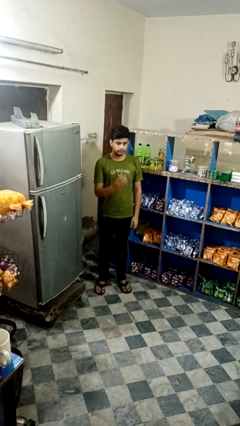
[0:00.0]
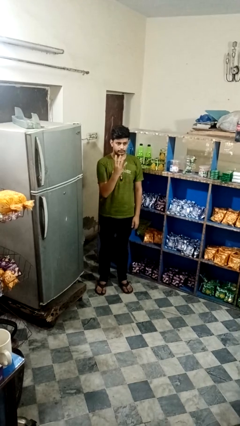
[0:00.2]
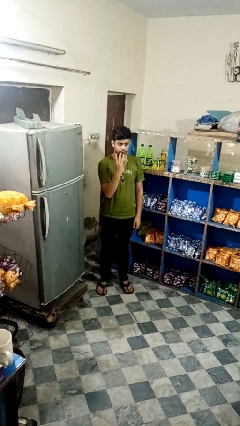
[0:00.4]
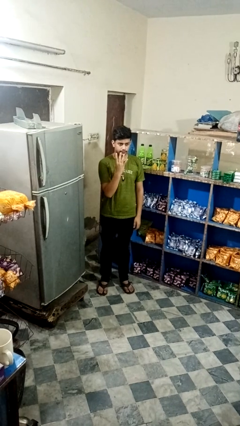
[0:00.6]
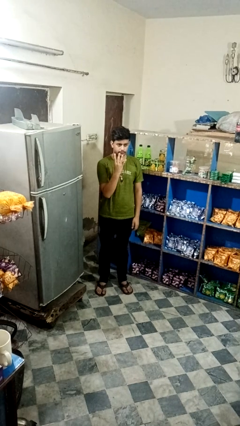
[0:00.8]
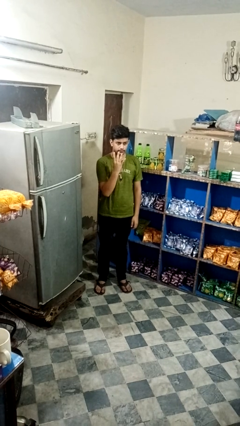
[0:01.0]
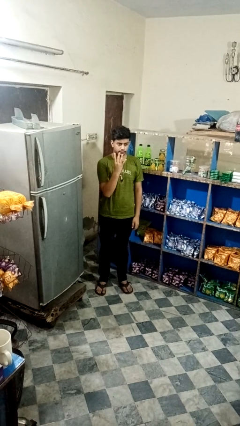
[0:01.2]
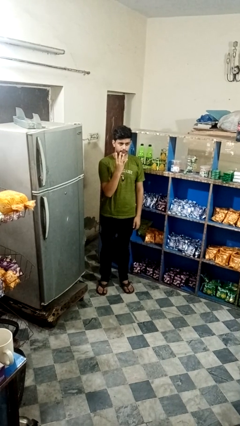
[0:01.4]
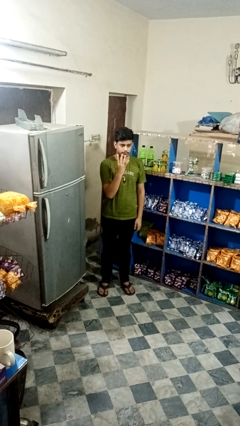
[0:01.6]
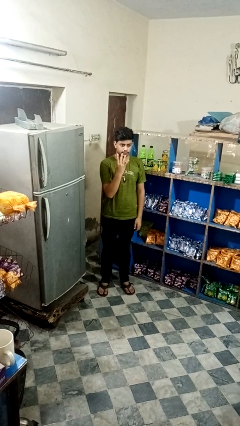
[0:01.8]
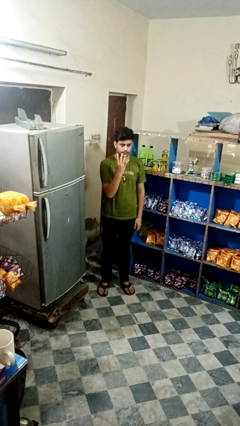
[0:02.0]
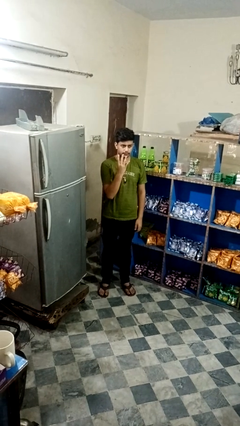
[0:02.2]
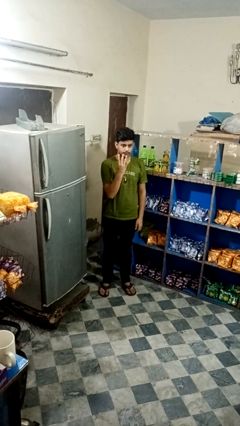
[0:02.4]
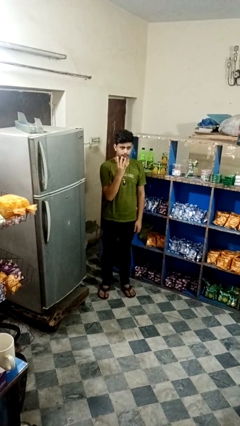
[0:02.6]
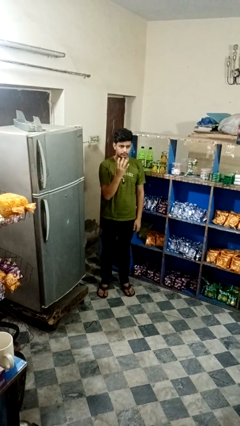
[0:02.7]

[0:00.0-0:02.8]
person gestures number four

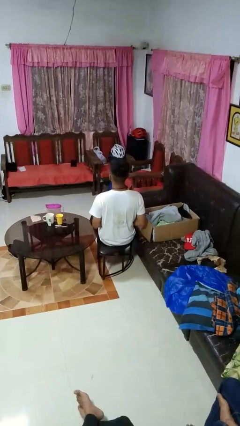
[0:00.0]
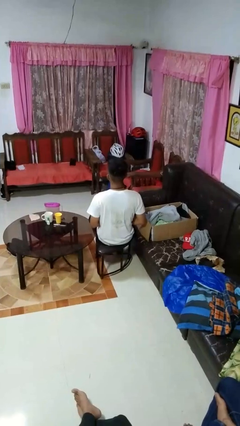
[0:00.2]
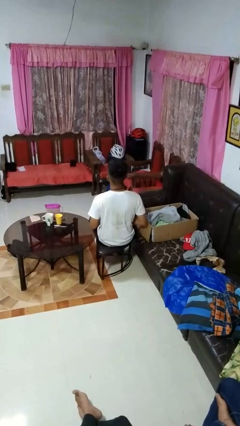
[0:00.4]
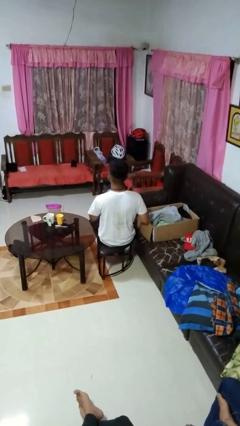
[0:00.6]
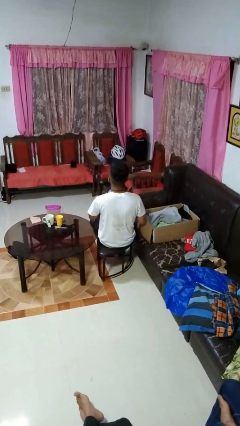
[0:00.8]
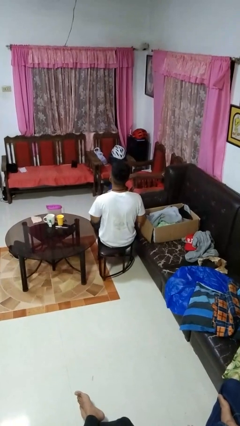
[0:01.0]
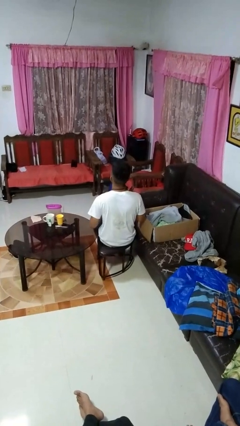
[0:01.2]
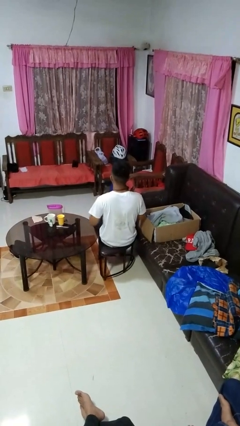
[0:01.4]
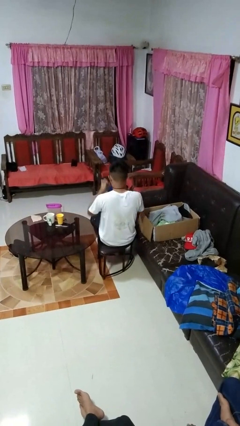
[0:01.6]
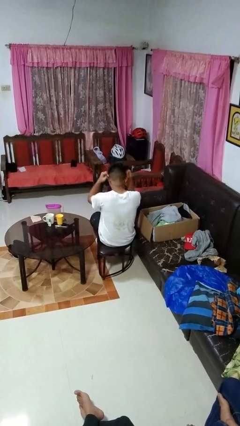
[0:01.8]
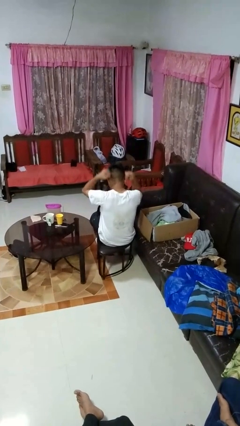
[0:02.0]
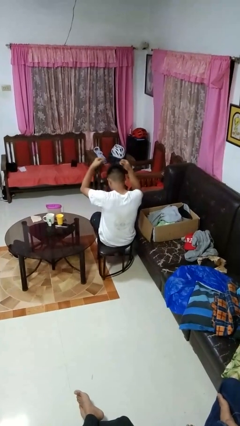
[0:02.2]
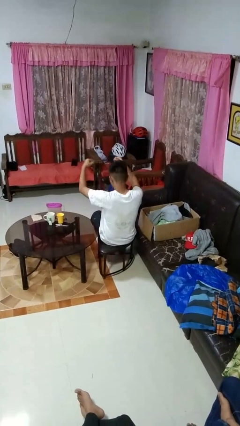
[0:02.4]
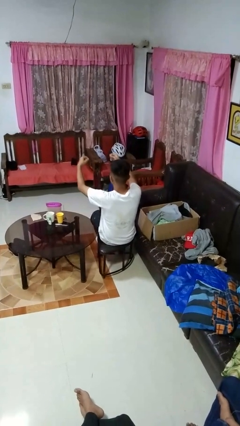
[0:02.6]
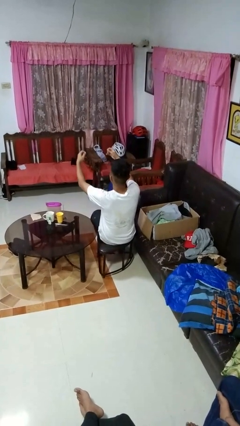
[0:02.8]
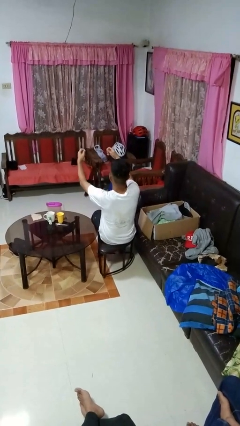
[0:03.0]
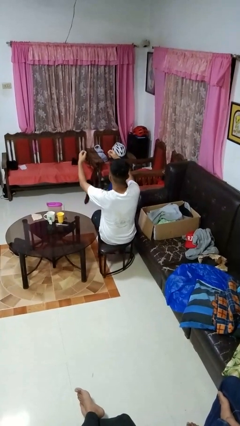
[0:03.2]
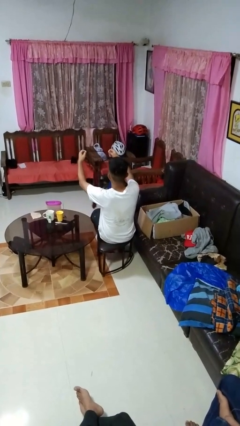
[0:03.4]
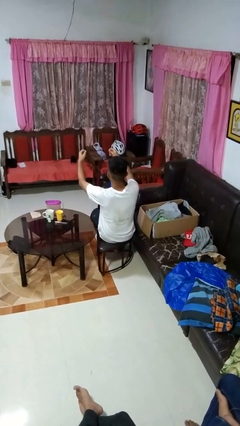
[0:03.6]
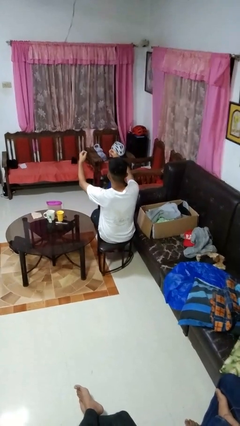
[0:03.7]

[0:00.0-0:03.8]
person takes off necktie

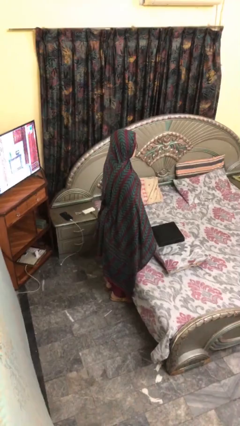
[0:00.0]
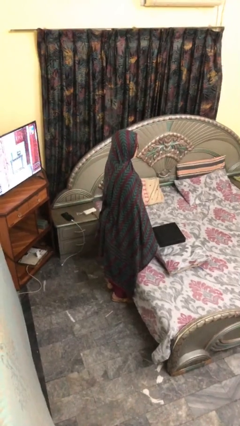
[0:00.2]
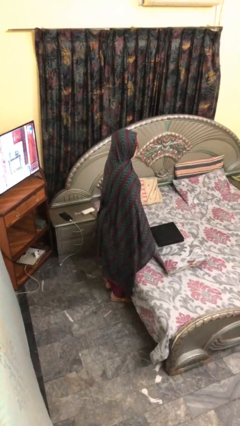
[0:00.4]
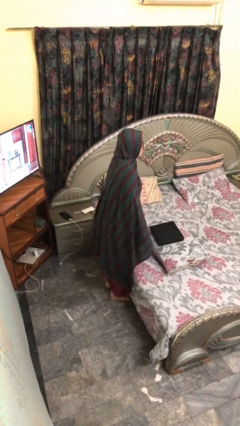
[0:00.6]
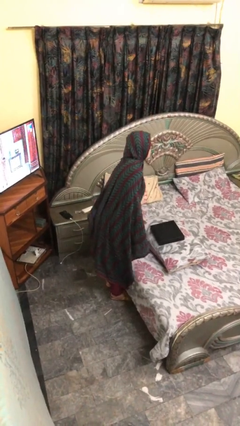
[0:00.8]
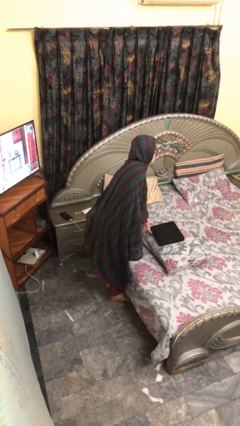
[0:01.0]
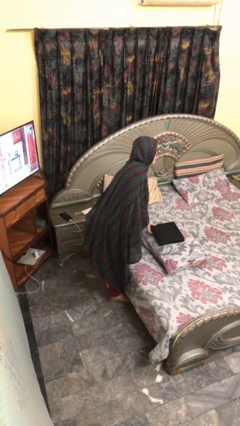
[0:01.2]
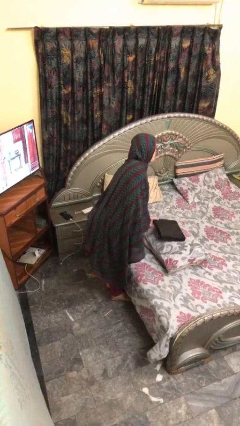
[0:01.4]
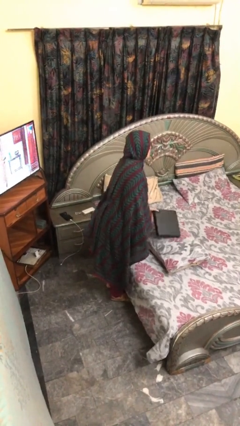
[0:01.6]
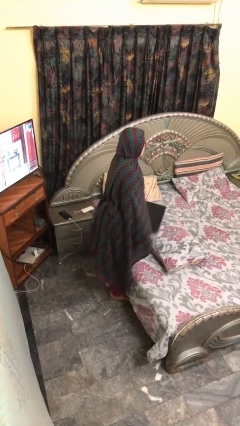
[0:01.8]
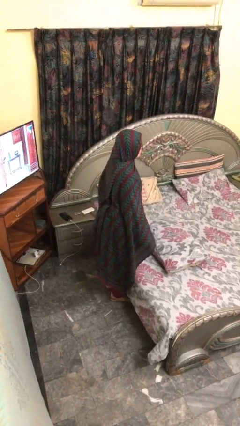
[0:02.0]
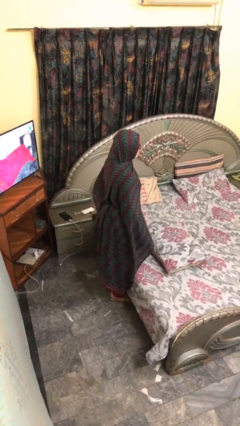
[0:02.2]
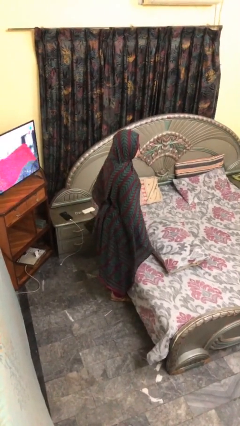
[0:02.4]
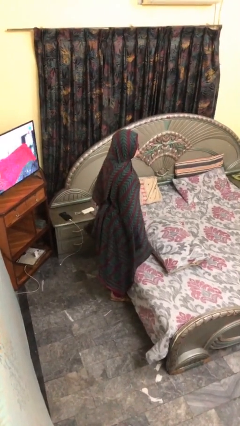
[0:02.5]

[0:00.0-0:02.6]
person picks up object from bed

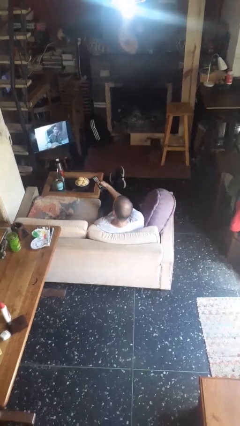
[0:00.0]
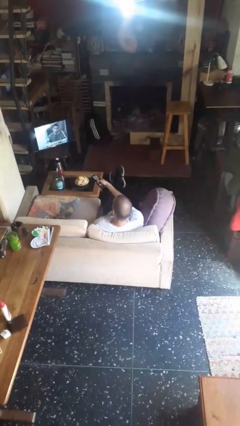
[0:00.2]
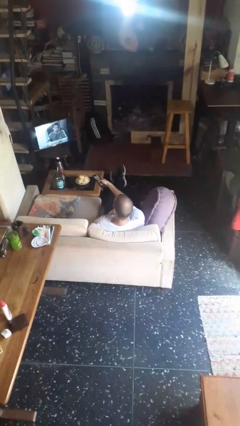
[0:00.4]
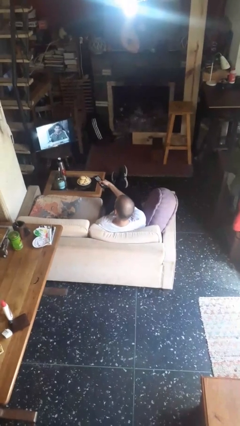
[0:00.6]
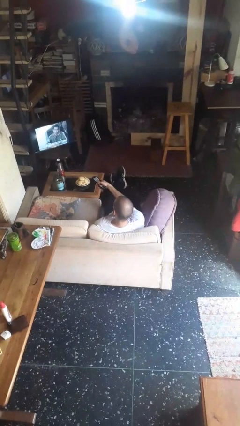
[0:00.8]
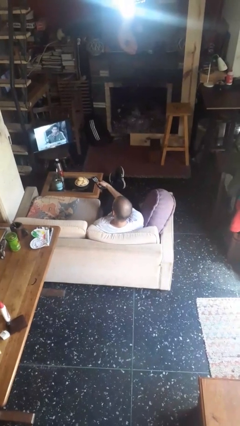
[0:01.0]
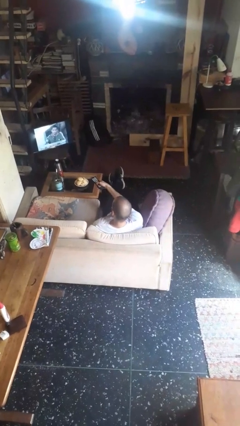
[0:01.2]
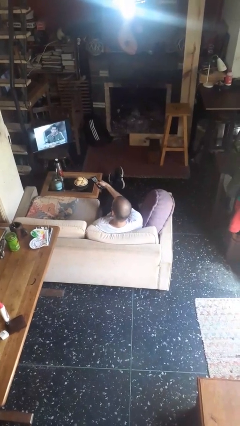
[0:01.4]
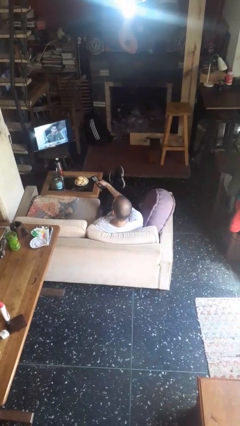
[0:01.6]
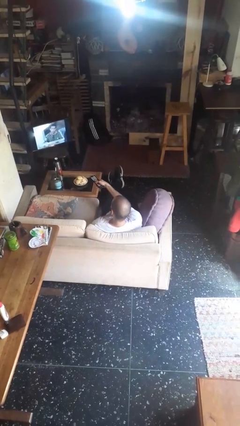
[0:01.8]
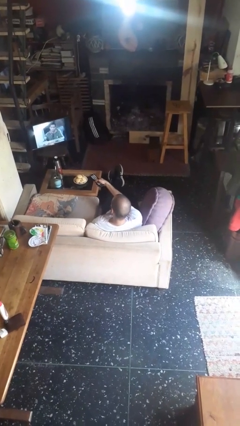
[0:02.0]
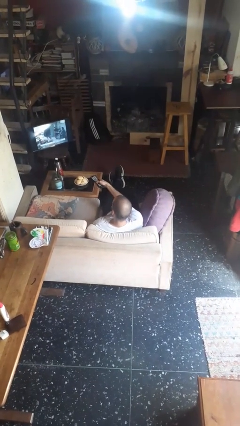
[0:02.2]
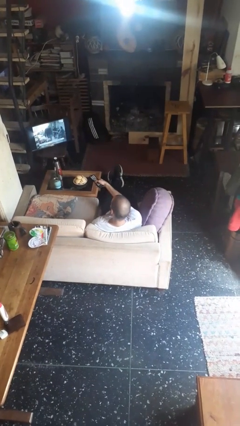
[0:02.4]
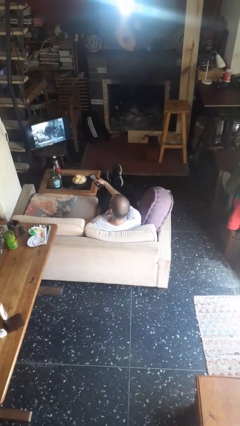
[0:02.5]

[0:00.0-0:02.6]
person uses television remote

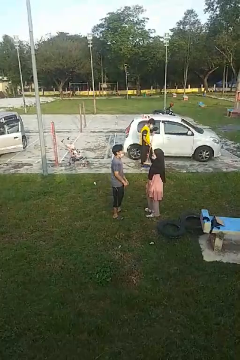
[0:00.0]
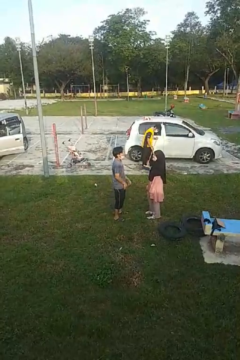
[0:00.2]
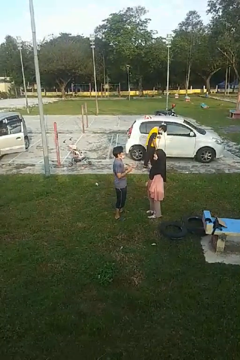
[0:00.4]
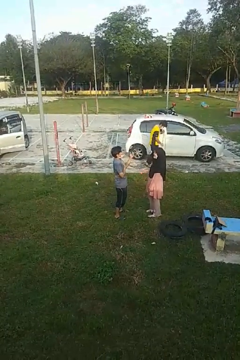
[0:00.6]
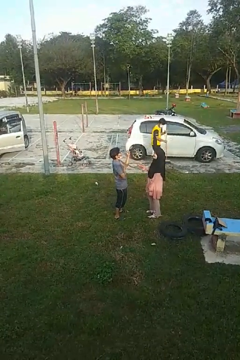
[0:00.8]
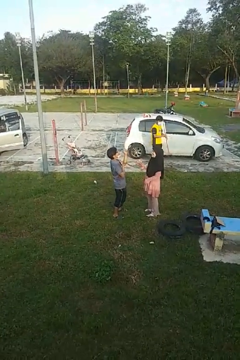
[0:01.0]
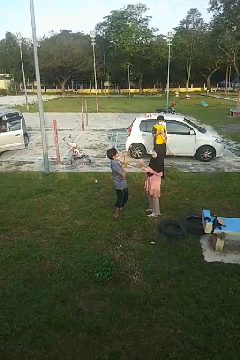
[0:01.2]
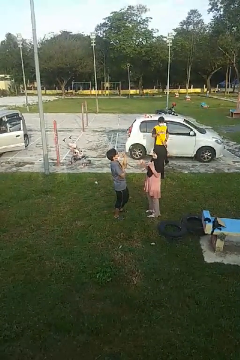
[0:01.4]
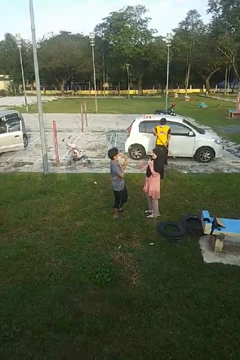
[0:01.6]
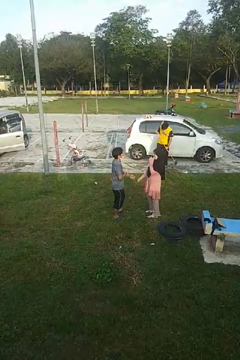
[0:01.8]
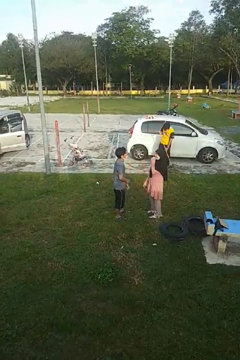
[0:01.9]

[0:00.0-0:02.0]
person laughs with person

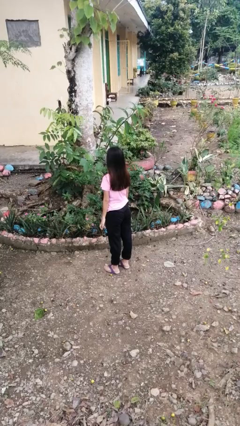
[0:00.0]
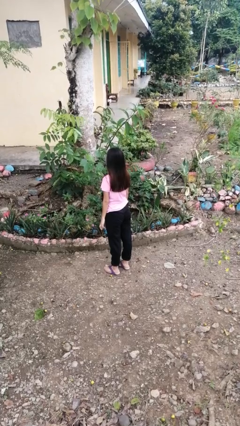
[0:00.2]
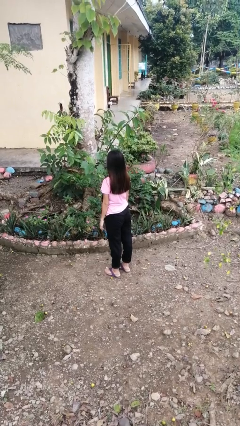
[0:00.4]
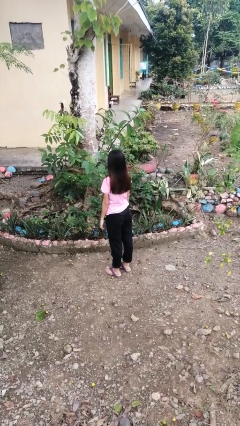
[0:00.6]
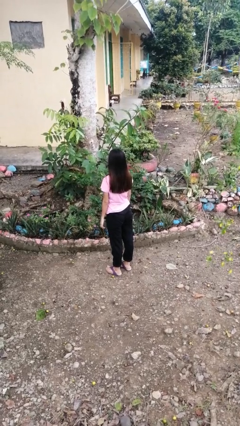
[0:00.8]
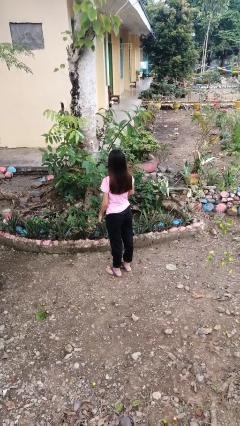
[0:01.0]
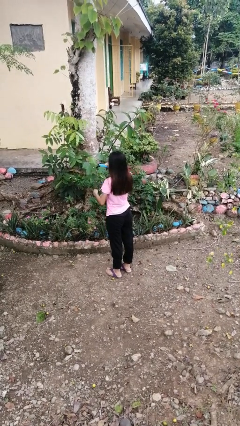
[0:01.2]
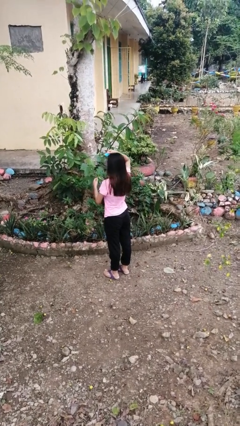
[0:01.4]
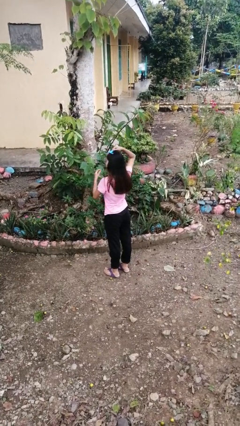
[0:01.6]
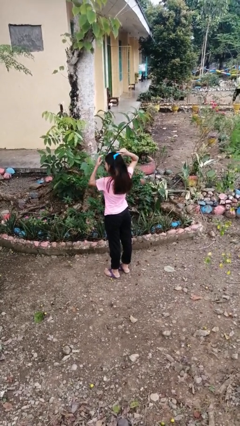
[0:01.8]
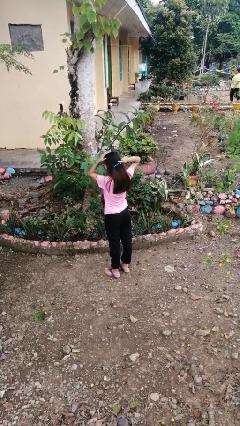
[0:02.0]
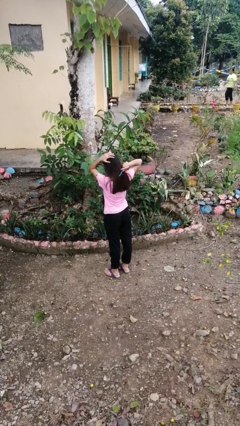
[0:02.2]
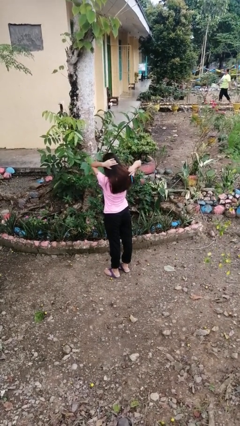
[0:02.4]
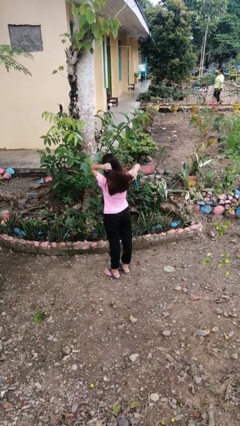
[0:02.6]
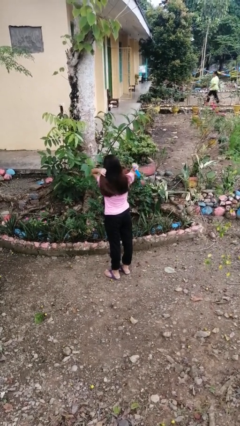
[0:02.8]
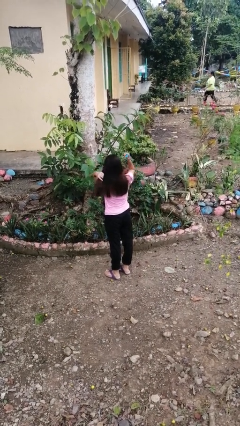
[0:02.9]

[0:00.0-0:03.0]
person brushes hair

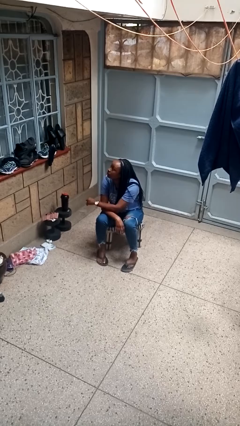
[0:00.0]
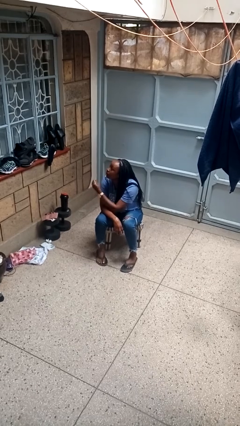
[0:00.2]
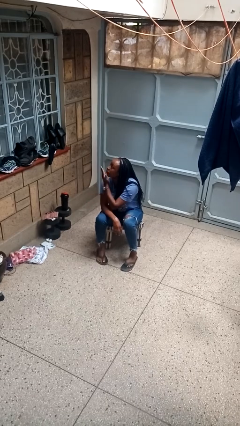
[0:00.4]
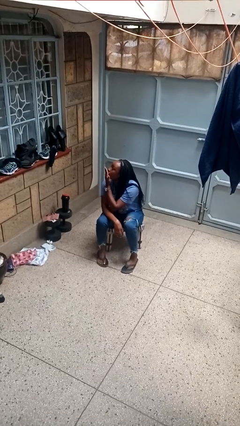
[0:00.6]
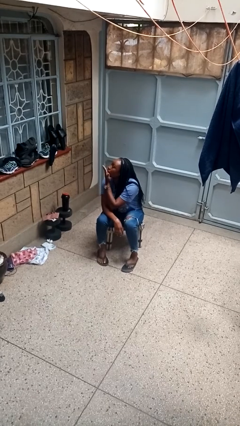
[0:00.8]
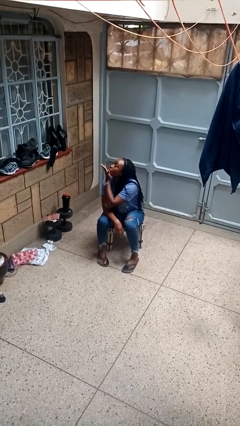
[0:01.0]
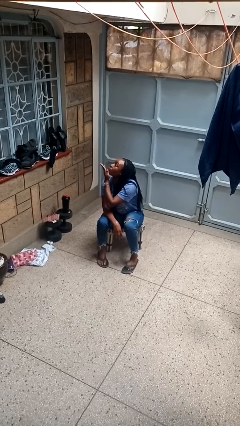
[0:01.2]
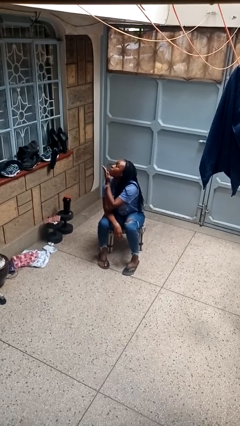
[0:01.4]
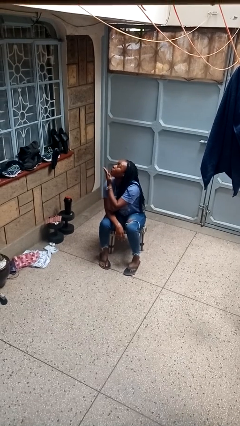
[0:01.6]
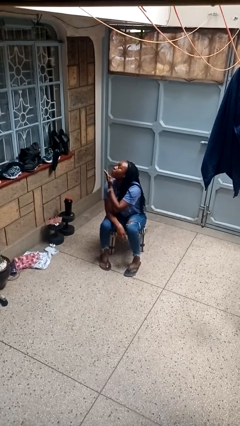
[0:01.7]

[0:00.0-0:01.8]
person gestures blow kiss
